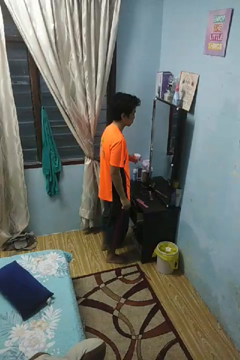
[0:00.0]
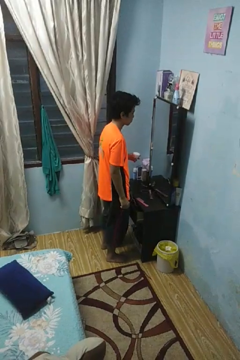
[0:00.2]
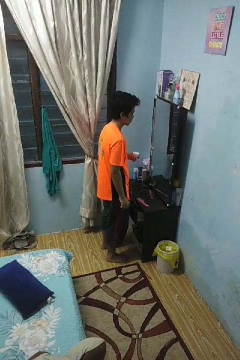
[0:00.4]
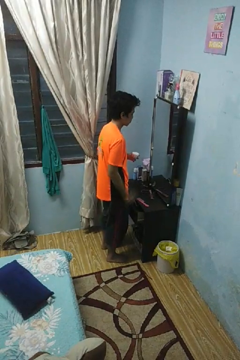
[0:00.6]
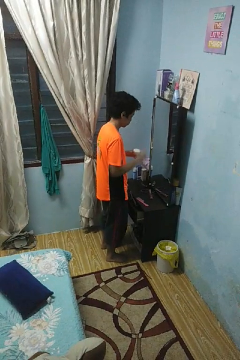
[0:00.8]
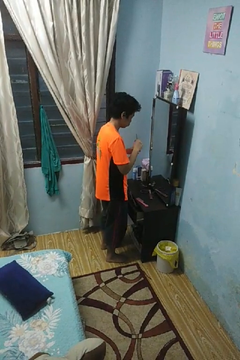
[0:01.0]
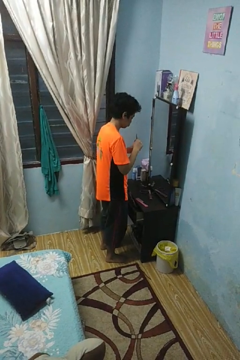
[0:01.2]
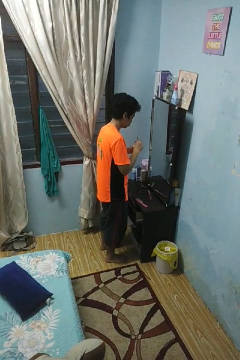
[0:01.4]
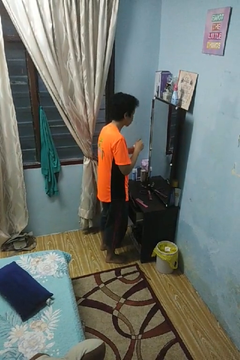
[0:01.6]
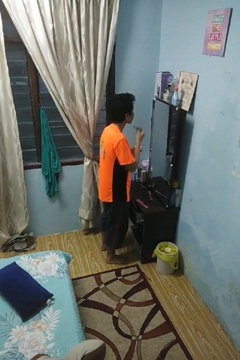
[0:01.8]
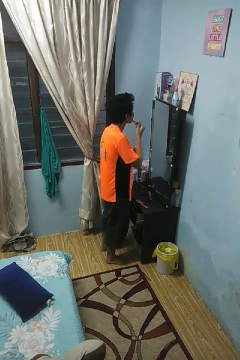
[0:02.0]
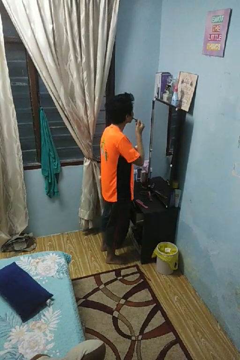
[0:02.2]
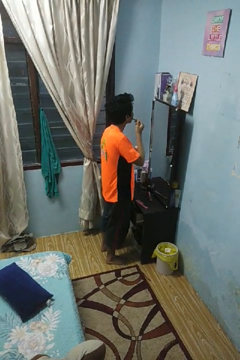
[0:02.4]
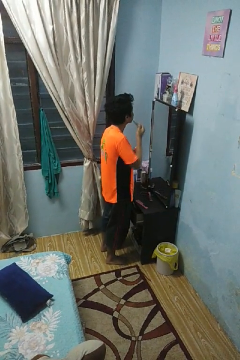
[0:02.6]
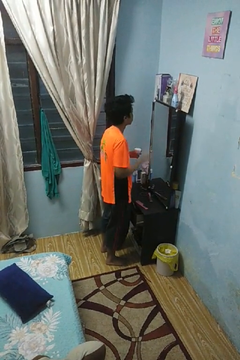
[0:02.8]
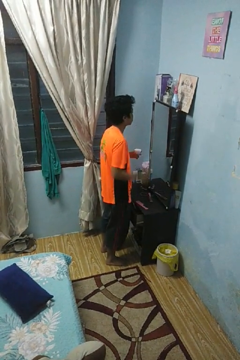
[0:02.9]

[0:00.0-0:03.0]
person applies foundation makeup

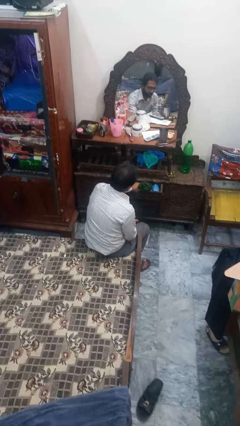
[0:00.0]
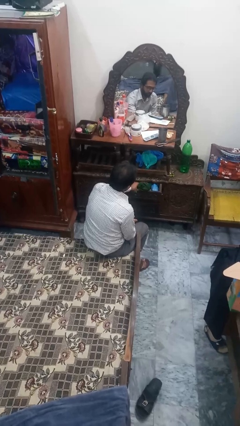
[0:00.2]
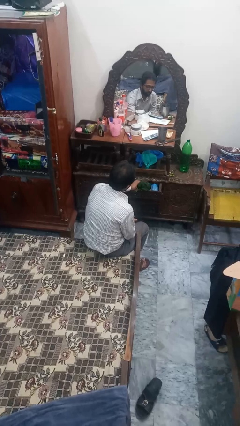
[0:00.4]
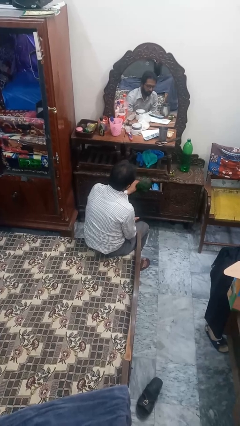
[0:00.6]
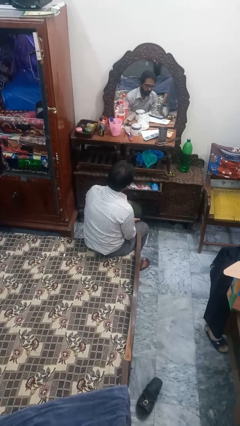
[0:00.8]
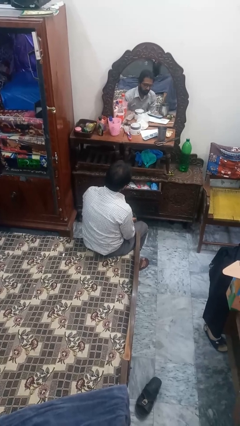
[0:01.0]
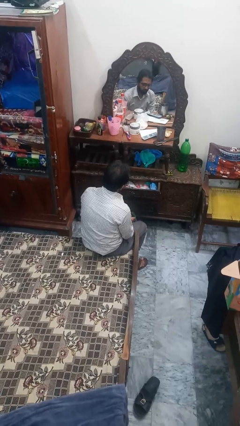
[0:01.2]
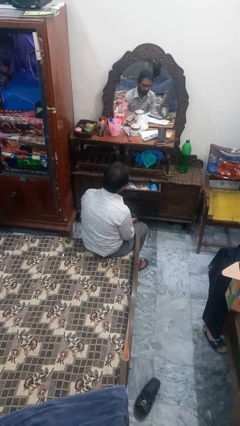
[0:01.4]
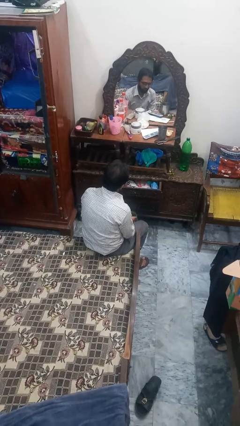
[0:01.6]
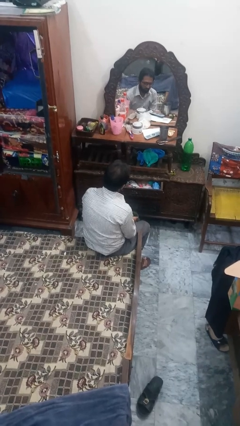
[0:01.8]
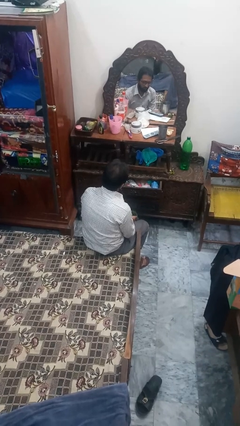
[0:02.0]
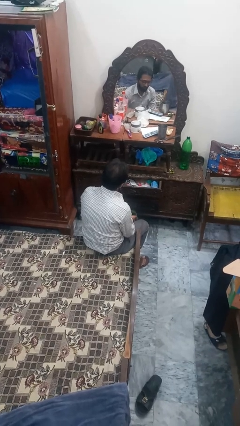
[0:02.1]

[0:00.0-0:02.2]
person takes clothes from dresser

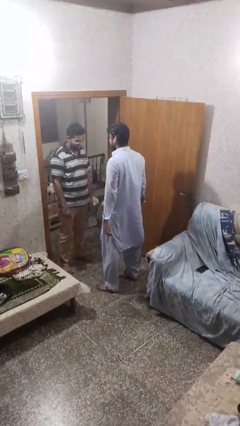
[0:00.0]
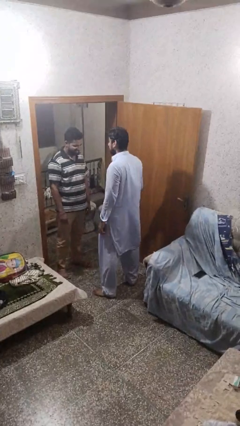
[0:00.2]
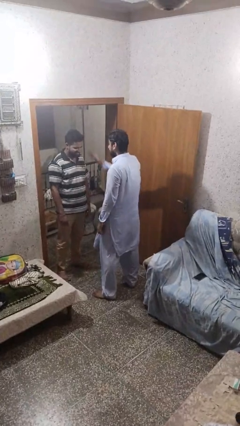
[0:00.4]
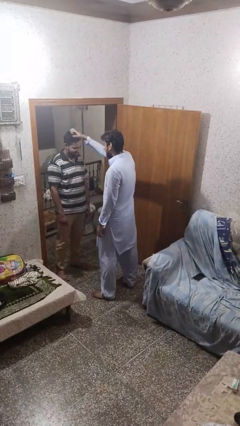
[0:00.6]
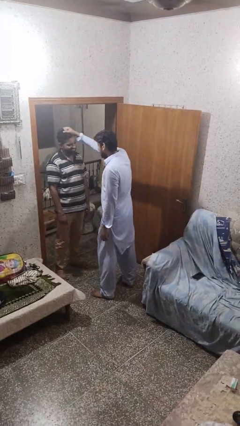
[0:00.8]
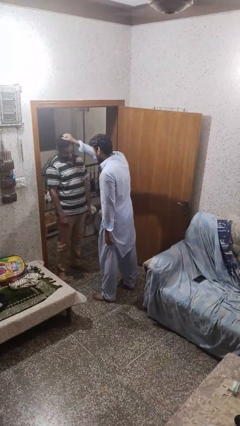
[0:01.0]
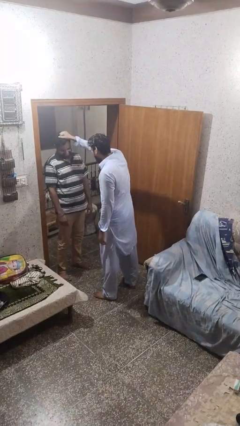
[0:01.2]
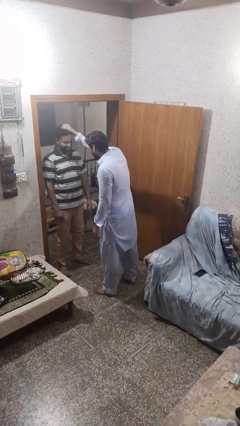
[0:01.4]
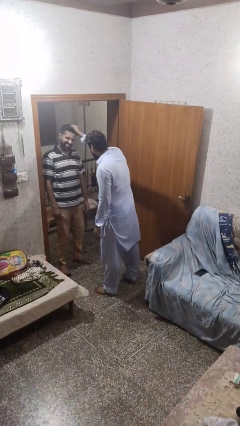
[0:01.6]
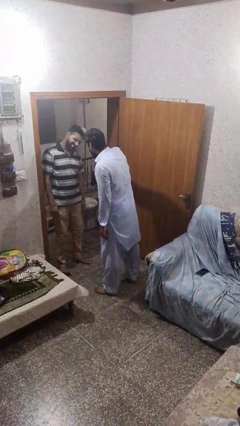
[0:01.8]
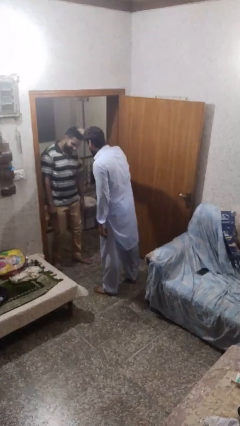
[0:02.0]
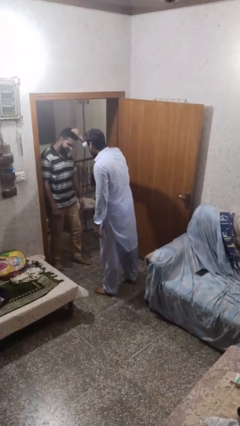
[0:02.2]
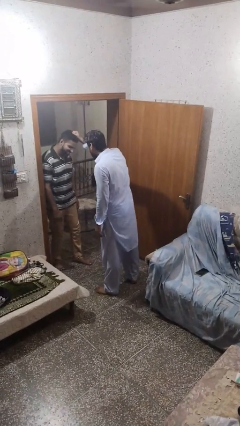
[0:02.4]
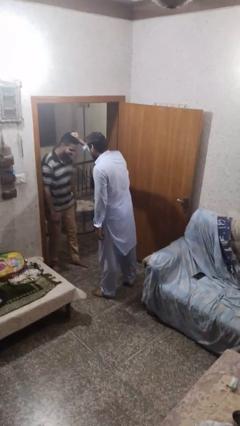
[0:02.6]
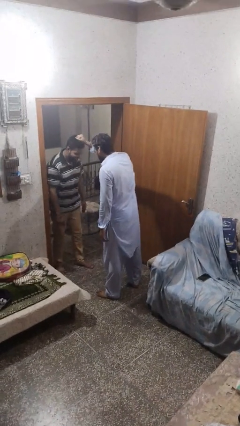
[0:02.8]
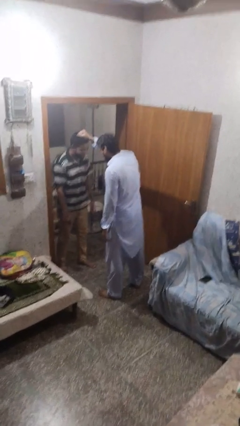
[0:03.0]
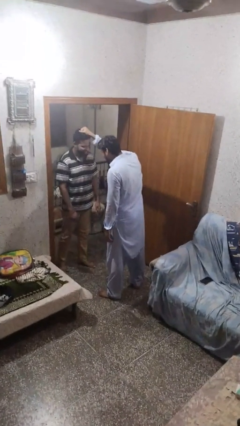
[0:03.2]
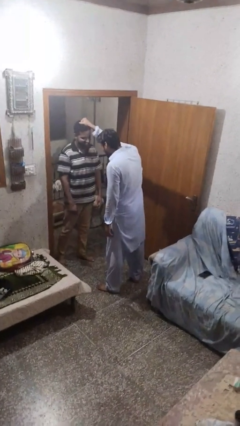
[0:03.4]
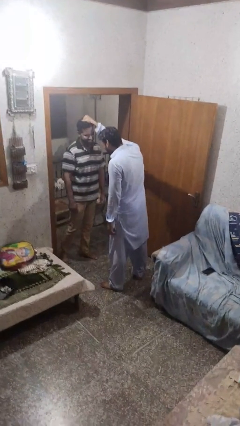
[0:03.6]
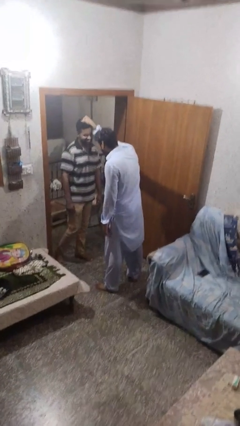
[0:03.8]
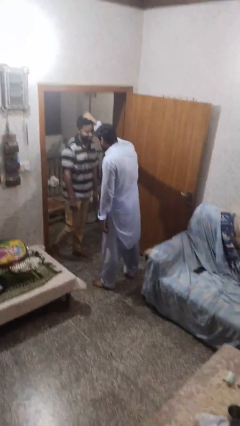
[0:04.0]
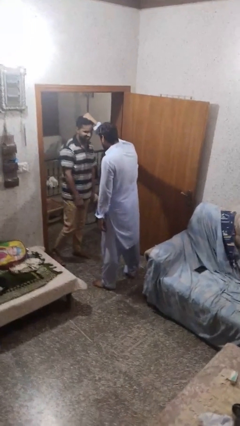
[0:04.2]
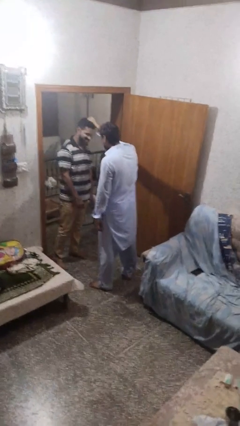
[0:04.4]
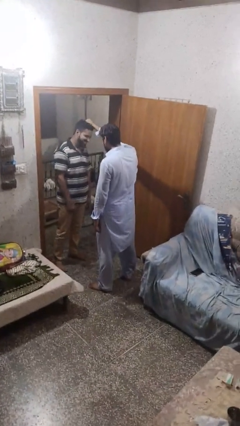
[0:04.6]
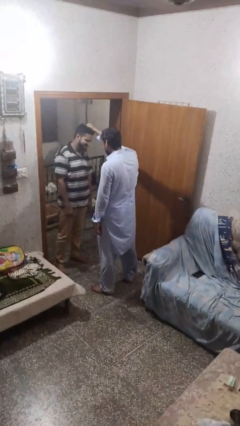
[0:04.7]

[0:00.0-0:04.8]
person grabs person by hair

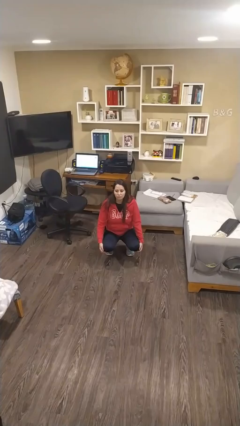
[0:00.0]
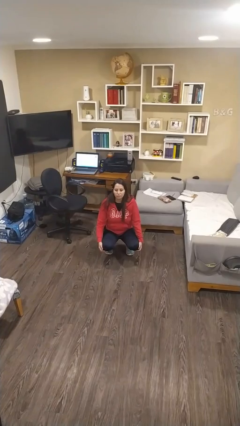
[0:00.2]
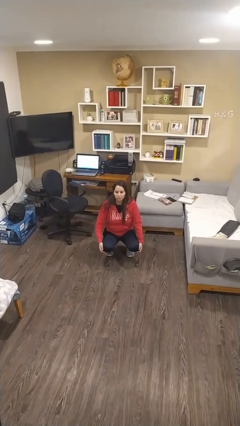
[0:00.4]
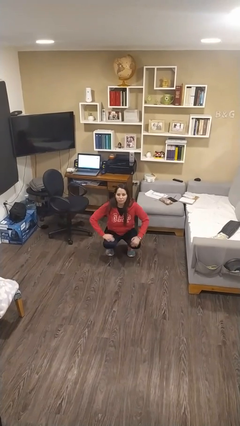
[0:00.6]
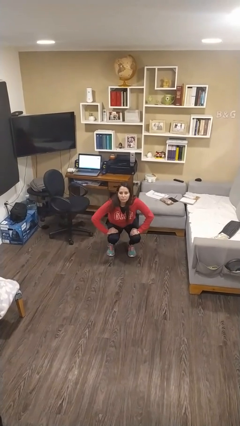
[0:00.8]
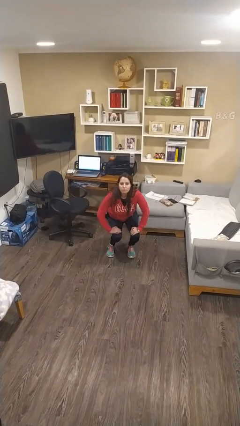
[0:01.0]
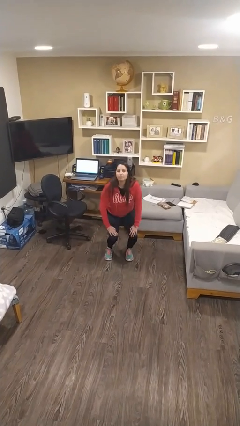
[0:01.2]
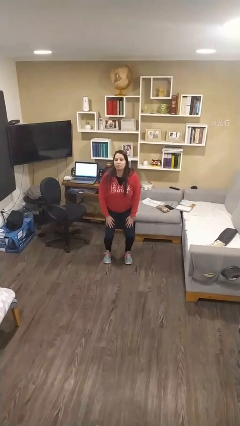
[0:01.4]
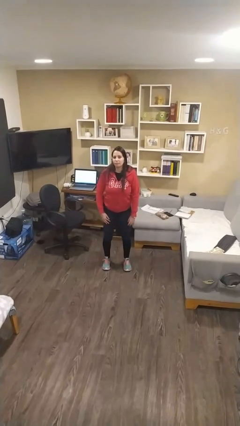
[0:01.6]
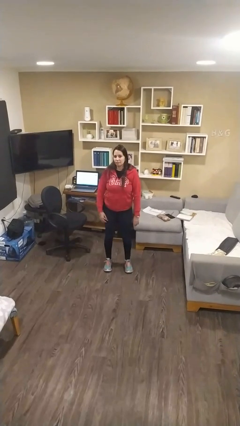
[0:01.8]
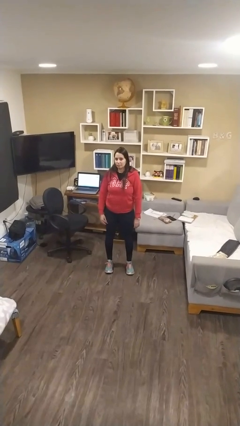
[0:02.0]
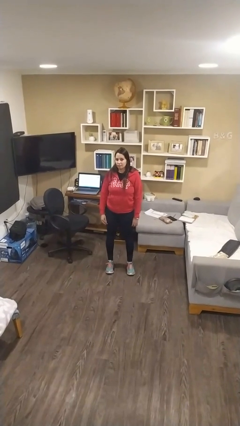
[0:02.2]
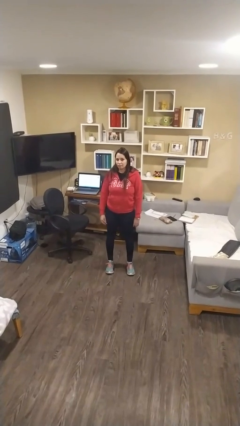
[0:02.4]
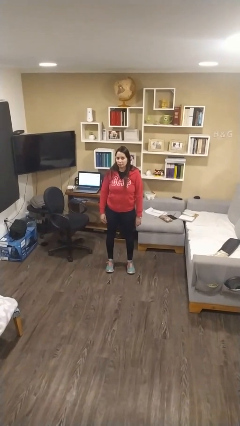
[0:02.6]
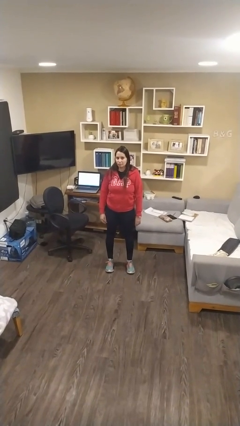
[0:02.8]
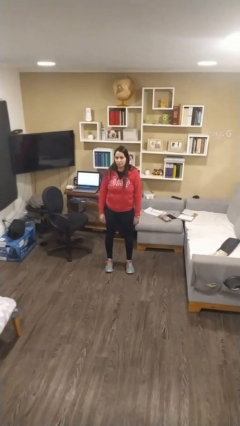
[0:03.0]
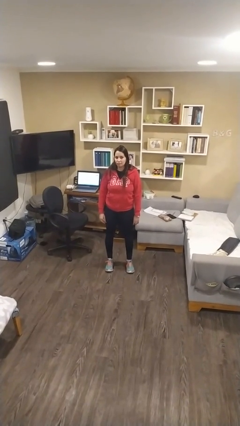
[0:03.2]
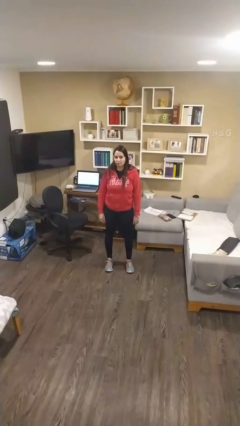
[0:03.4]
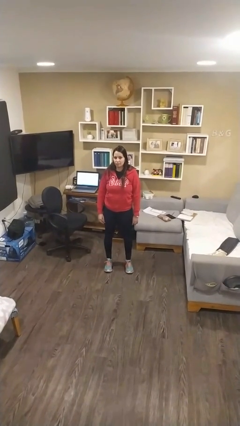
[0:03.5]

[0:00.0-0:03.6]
person stands up

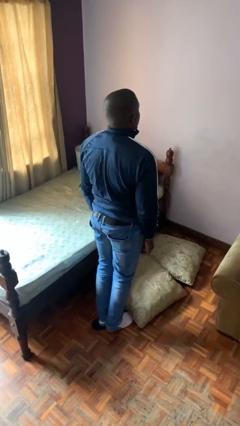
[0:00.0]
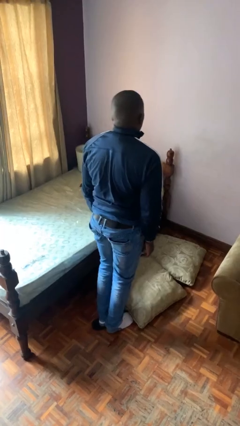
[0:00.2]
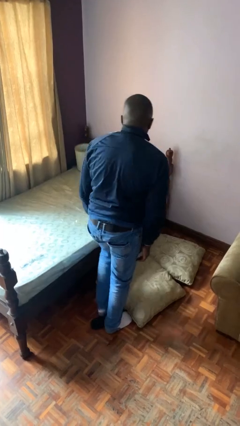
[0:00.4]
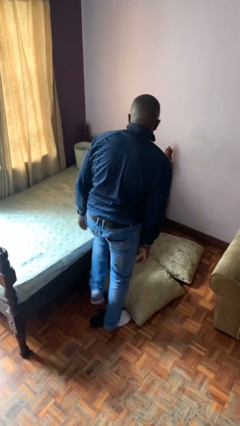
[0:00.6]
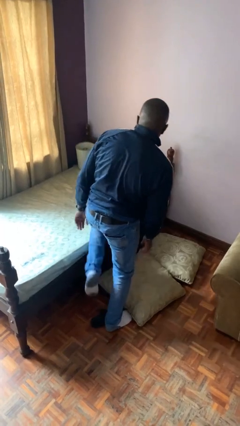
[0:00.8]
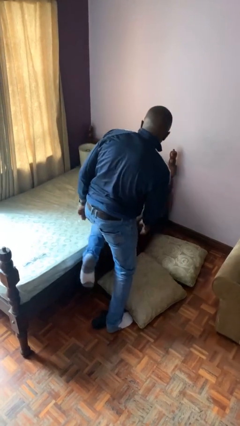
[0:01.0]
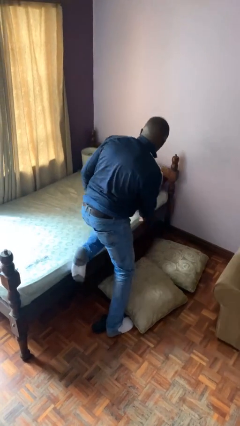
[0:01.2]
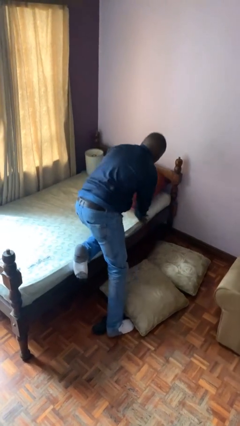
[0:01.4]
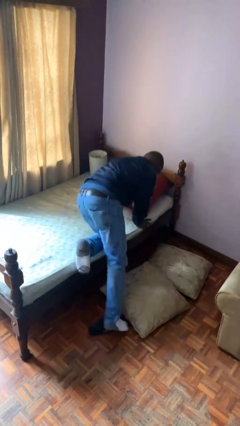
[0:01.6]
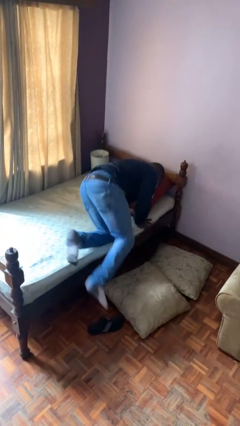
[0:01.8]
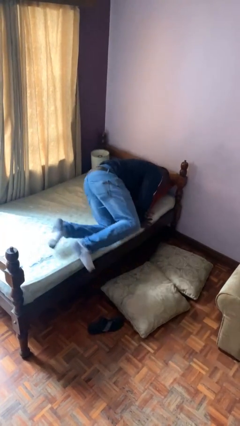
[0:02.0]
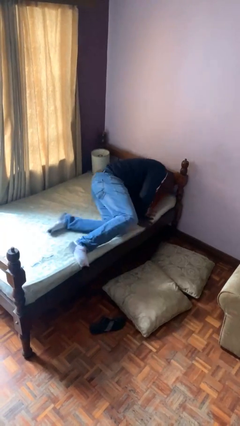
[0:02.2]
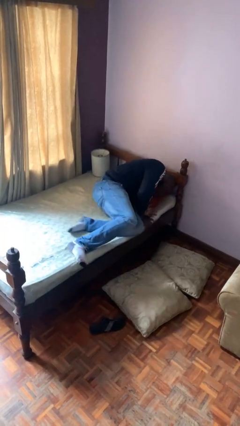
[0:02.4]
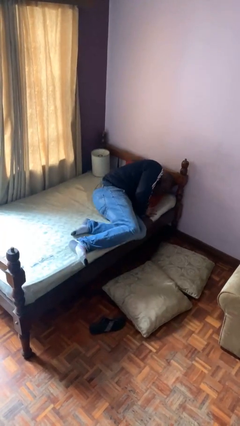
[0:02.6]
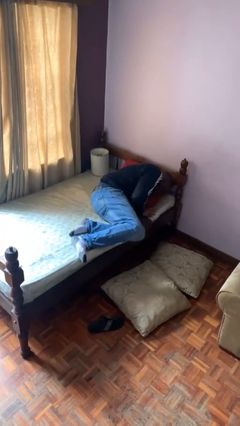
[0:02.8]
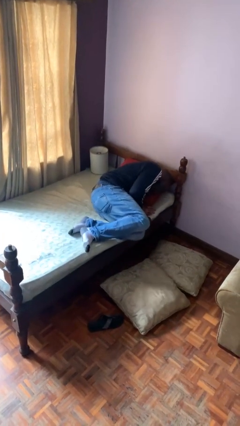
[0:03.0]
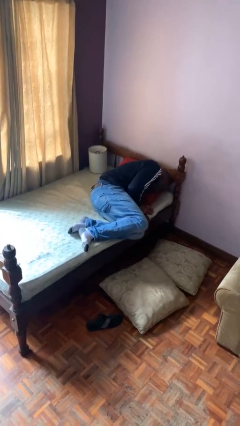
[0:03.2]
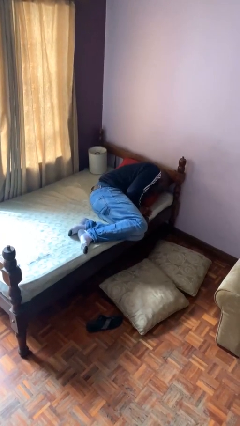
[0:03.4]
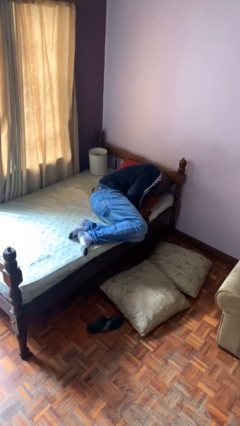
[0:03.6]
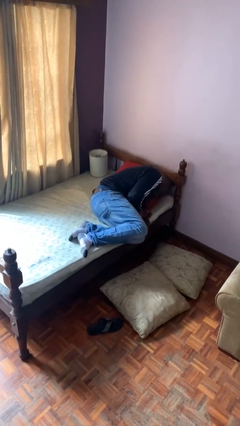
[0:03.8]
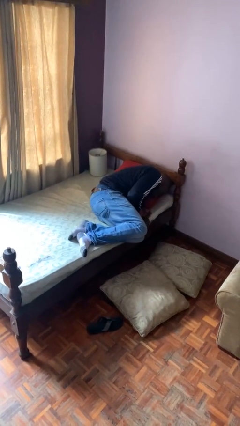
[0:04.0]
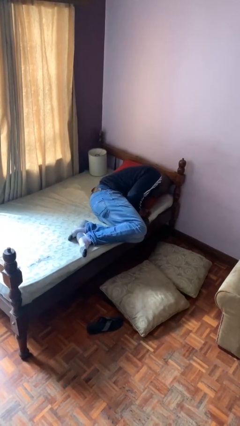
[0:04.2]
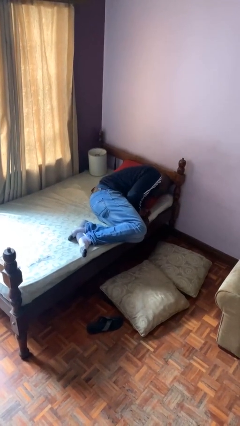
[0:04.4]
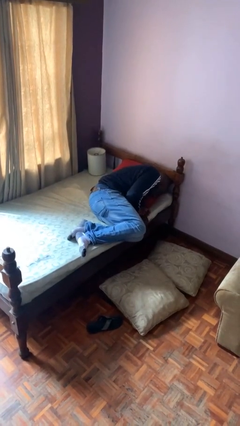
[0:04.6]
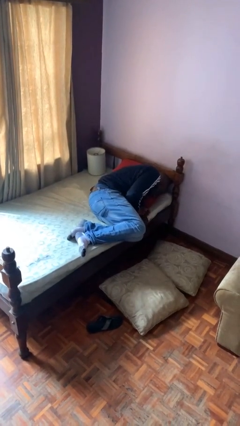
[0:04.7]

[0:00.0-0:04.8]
person lies down on bed
